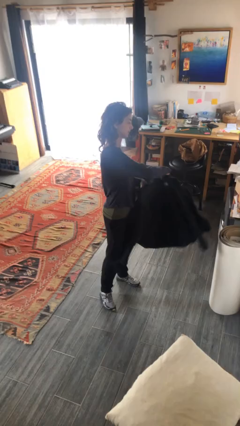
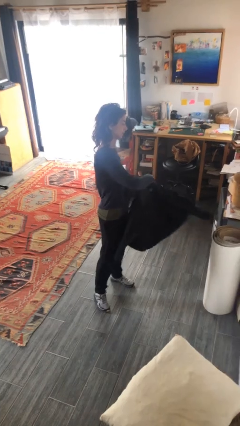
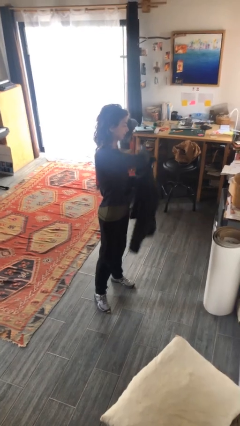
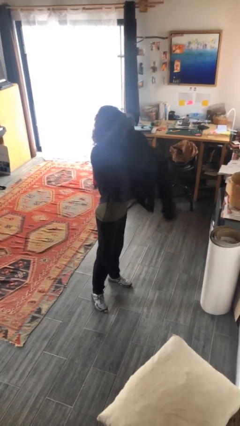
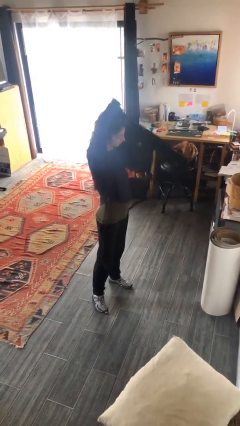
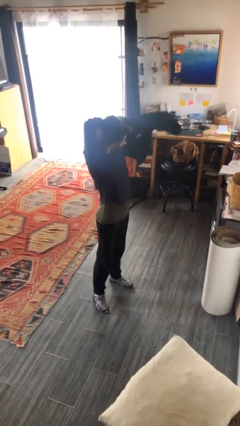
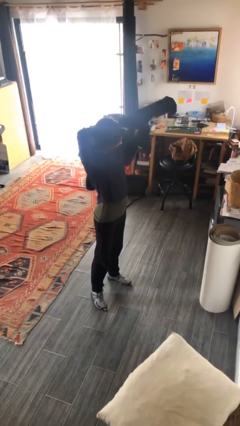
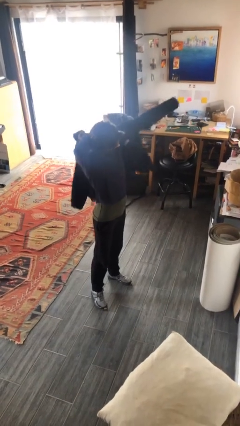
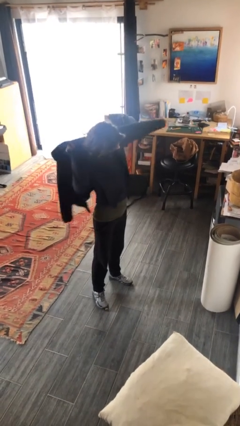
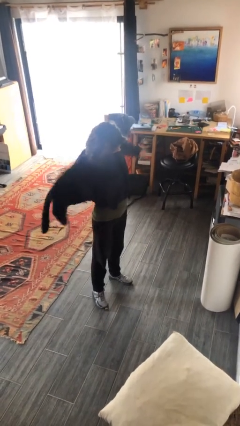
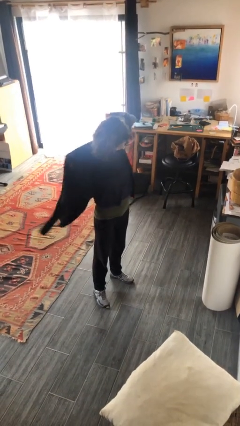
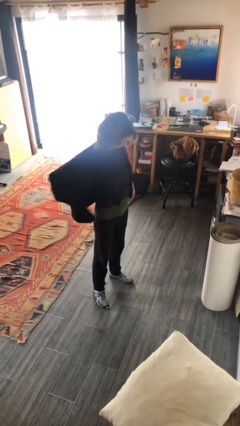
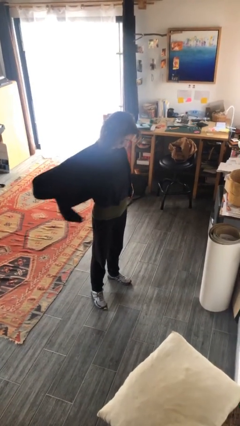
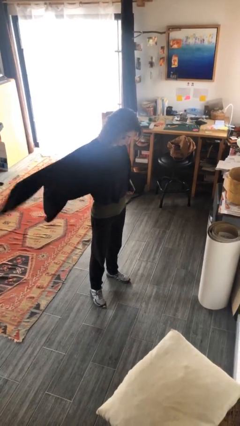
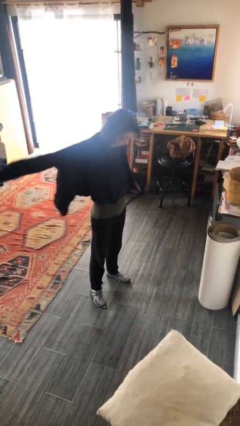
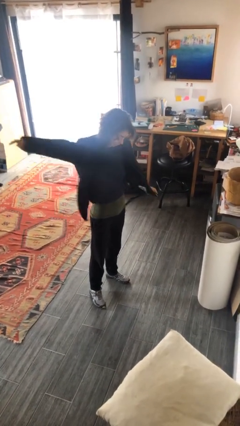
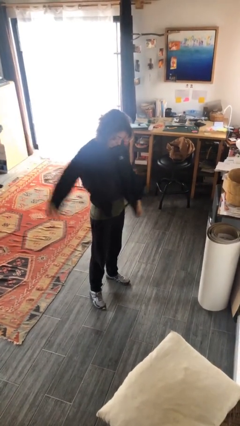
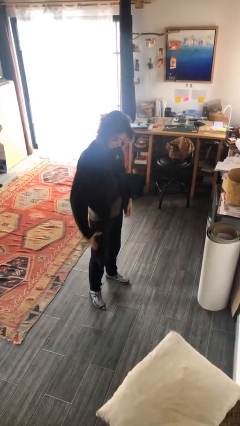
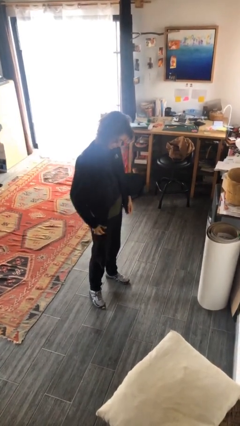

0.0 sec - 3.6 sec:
person puts on jacket

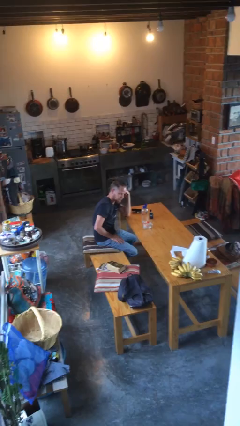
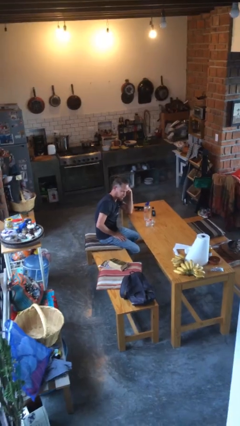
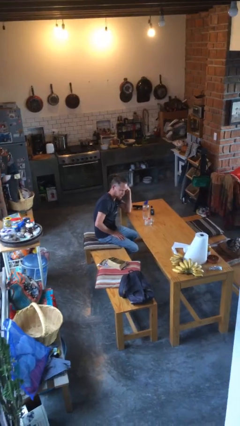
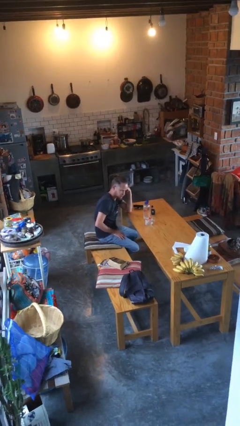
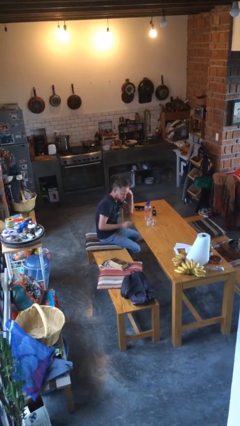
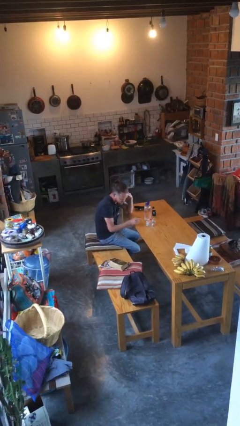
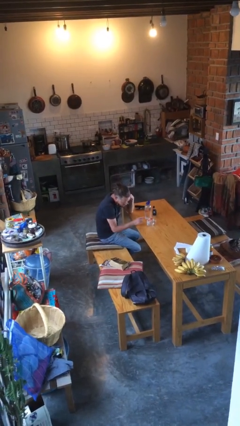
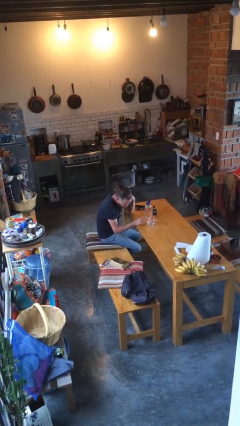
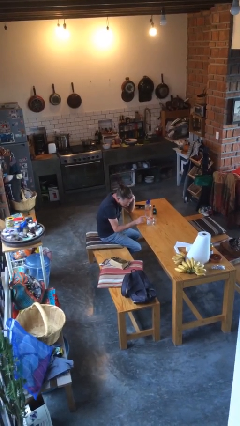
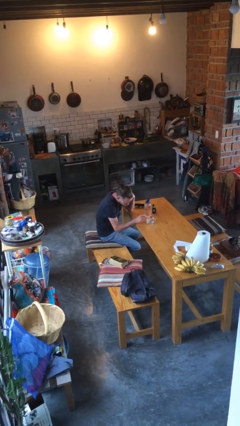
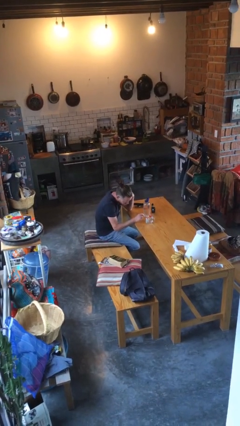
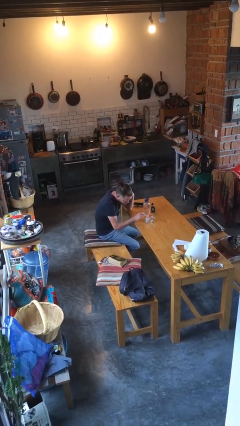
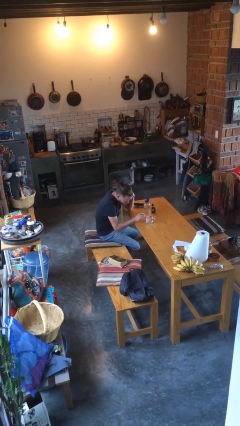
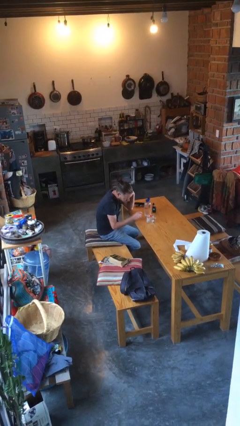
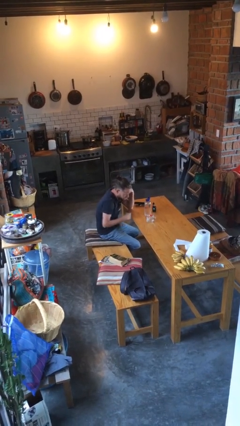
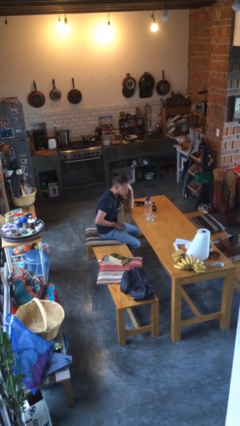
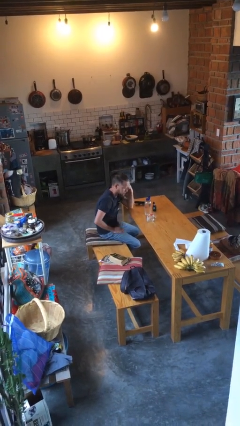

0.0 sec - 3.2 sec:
person taps object with finger

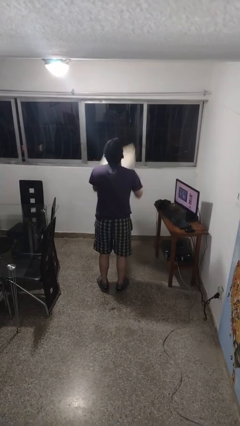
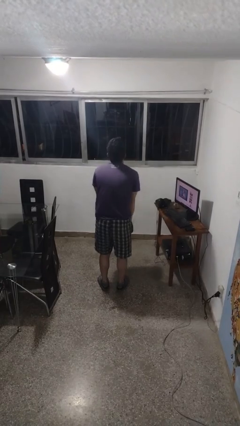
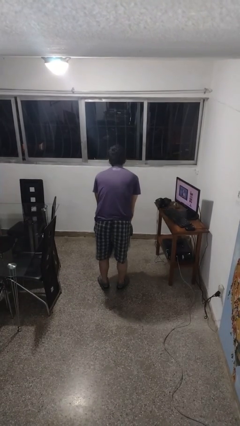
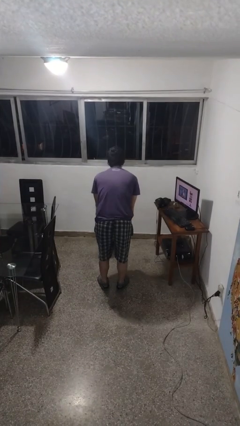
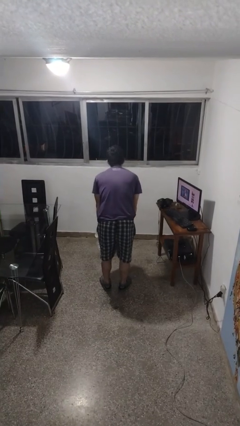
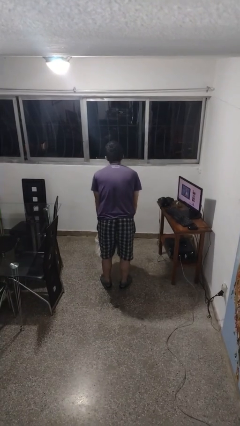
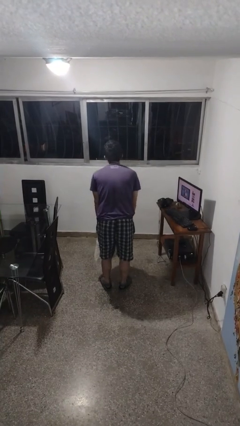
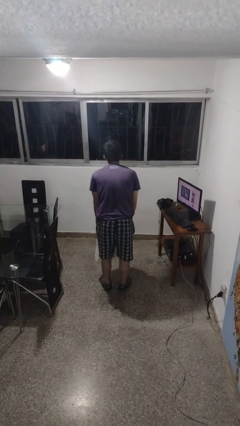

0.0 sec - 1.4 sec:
person catches dropped object

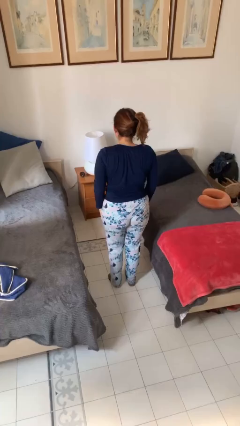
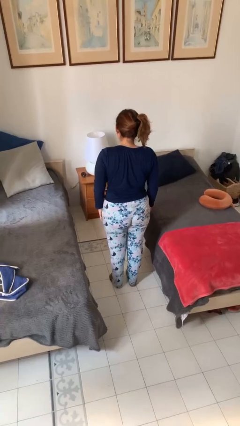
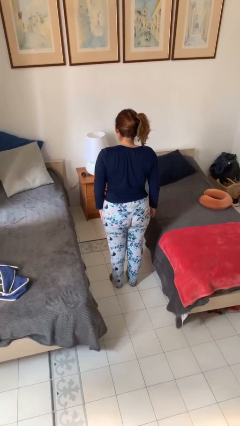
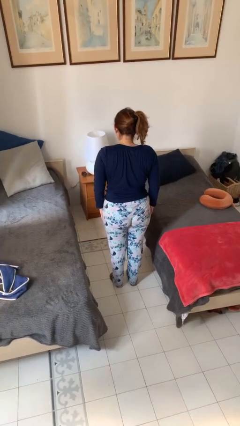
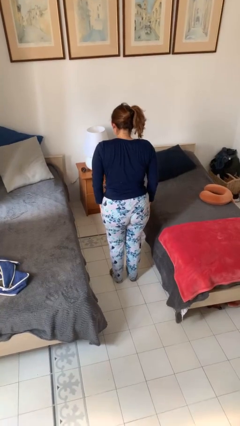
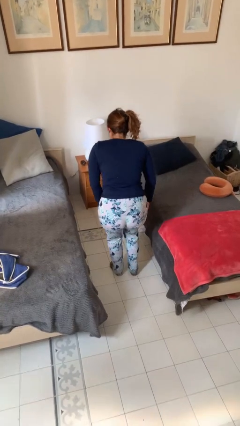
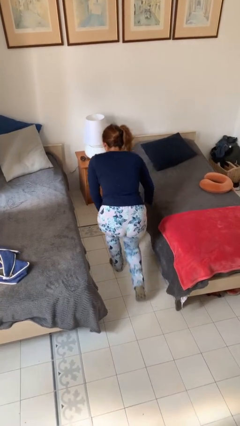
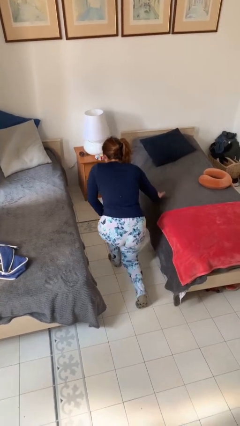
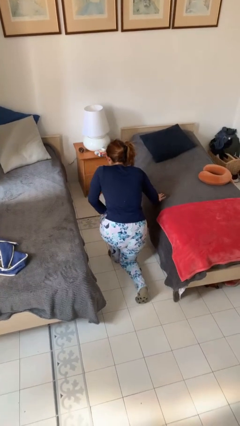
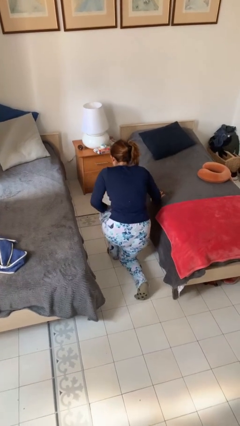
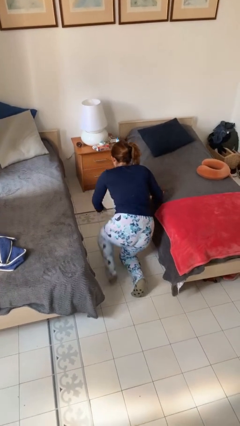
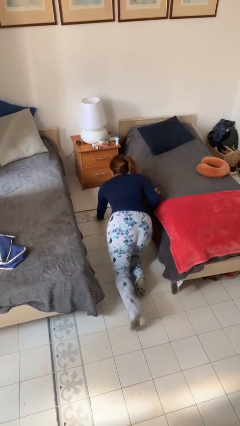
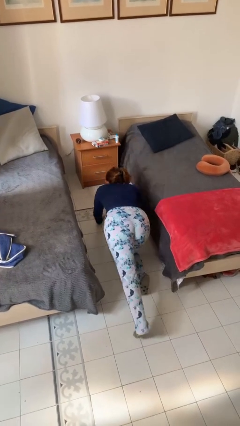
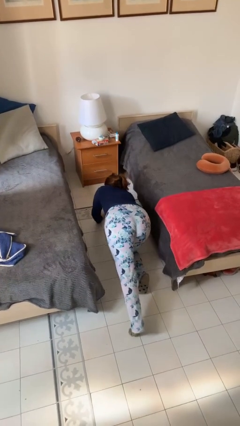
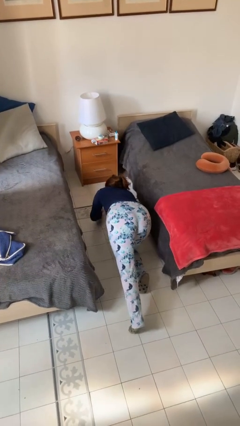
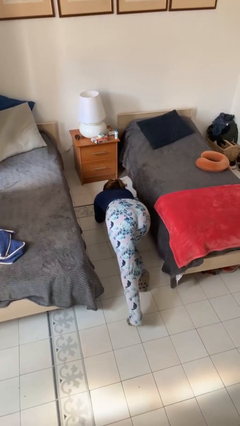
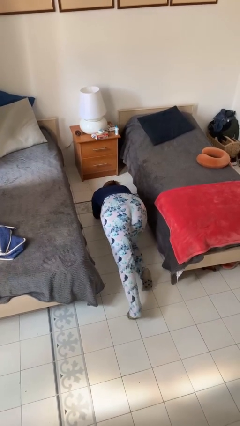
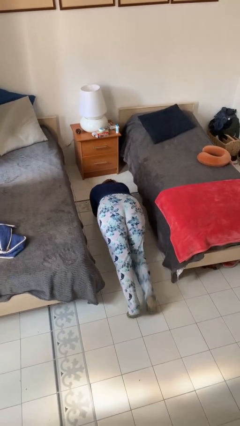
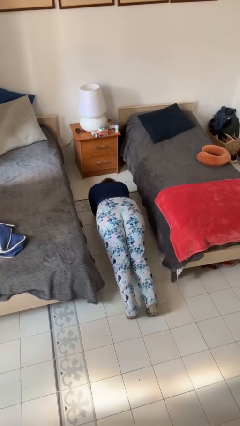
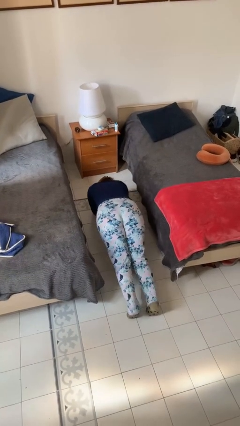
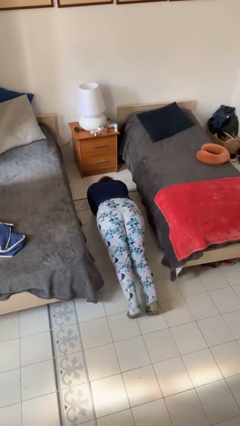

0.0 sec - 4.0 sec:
person exercises with plank

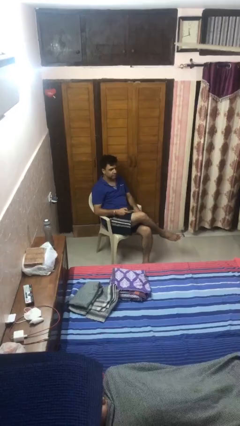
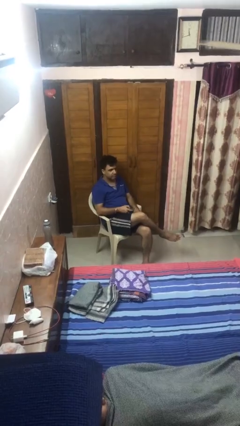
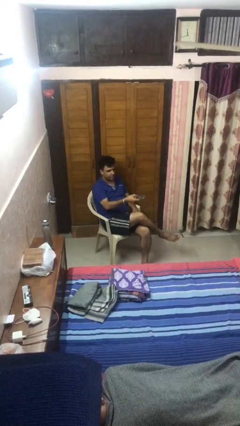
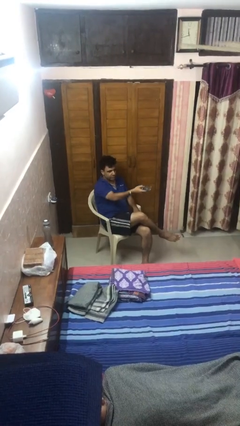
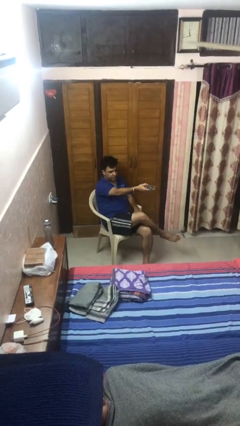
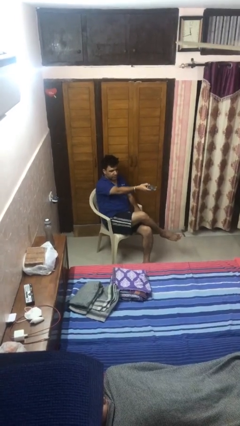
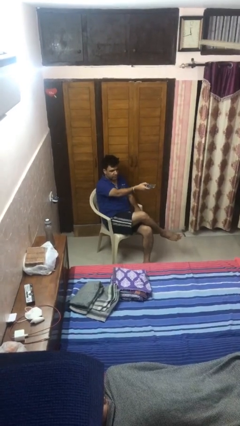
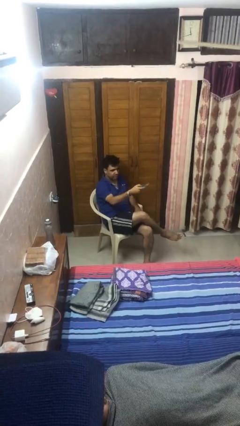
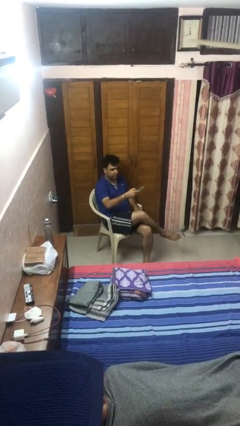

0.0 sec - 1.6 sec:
person uses television remote

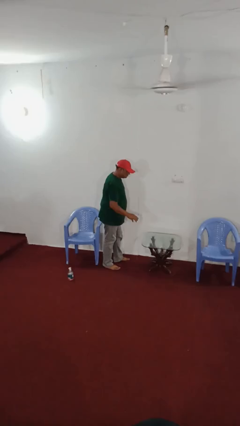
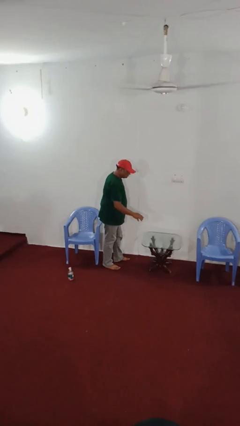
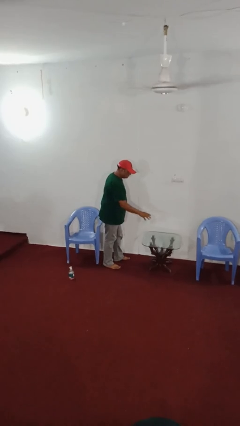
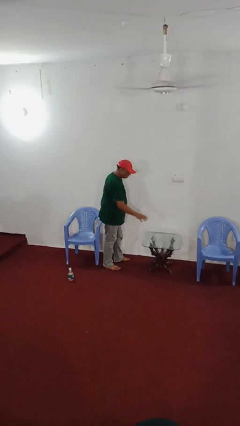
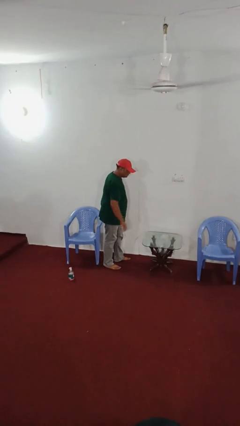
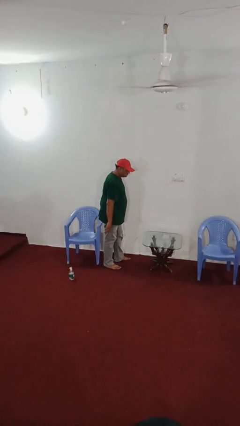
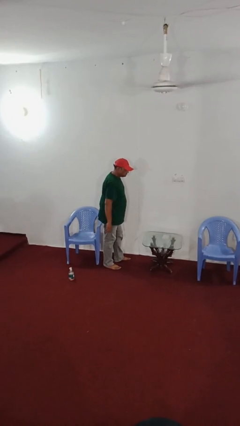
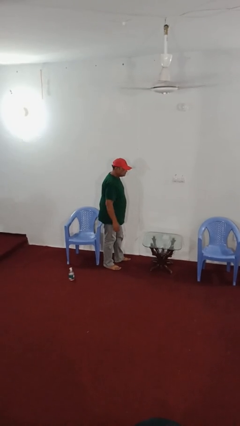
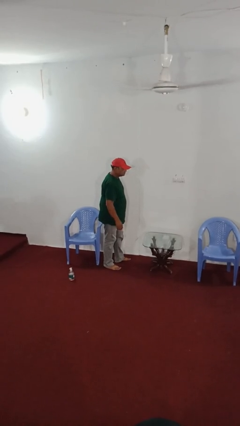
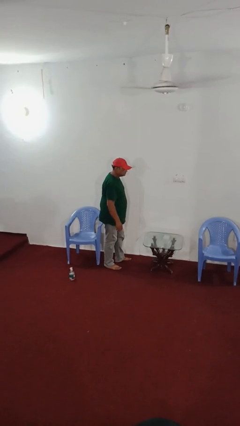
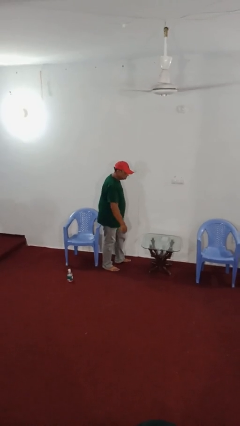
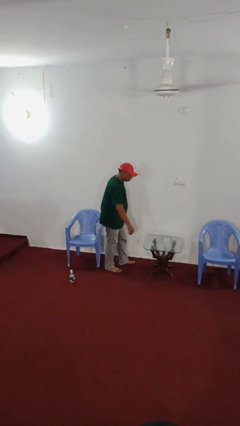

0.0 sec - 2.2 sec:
person throws object on table

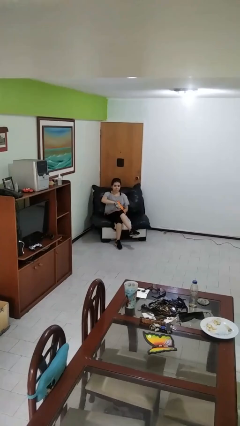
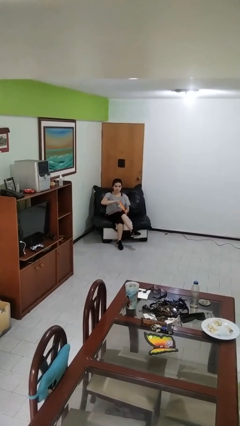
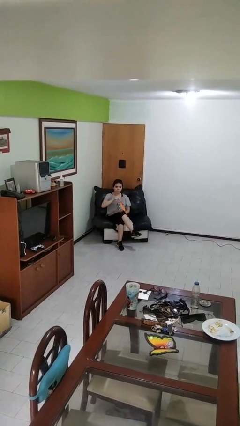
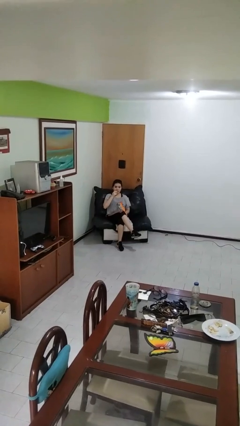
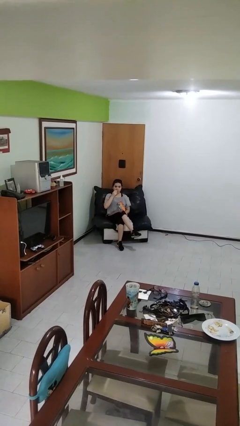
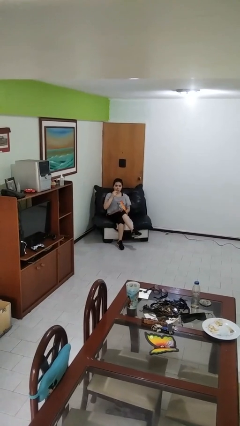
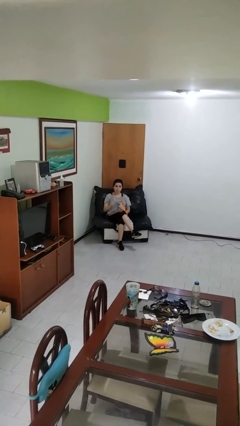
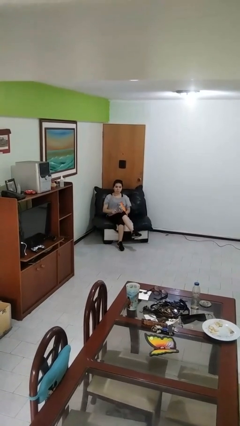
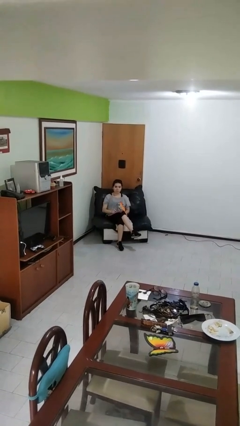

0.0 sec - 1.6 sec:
person eats snack from bag
